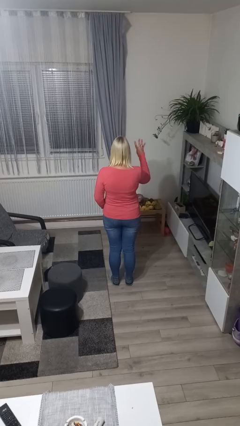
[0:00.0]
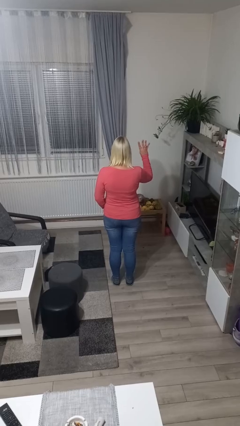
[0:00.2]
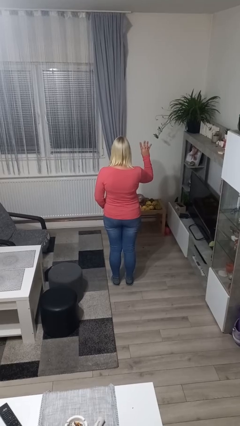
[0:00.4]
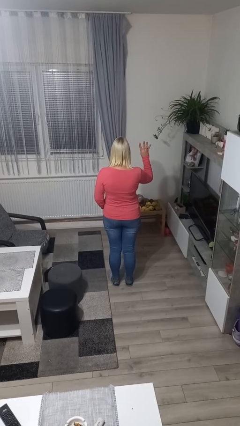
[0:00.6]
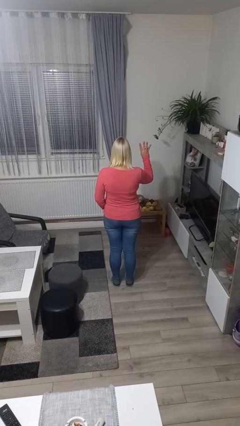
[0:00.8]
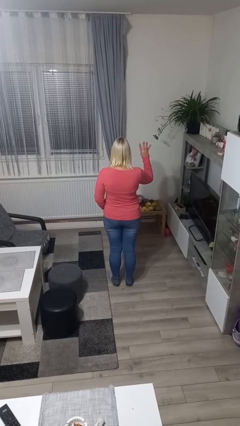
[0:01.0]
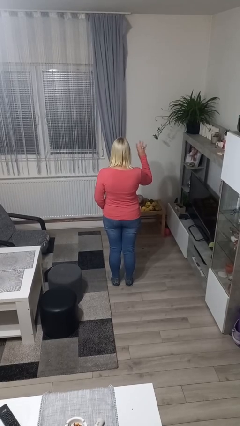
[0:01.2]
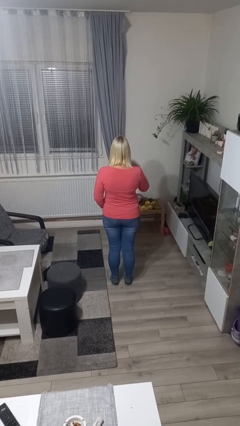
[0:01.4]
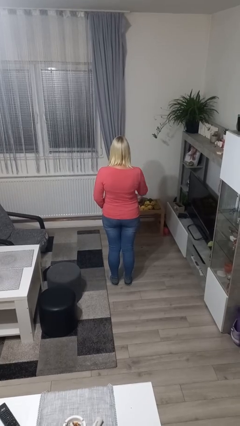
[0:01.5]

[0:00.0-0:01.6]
person gestures number four

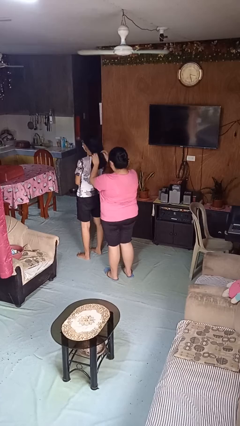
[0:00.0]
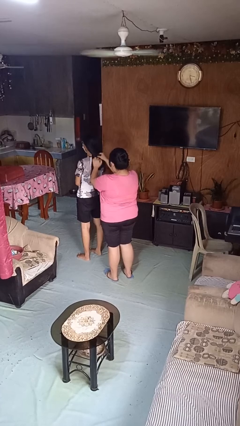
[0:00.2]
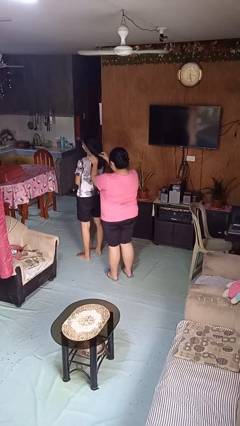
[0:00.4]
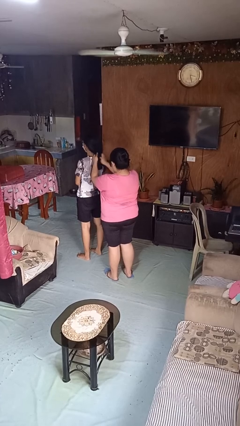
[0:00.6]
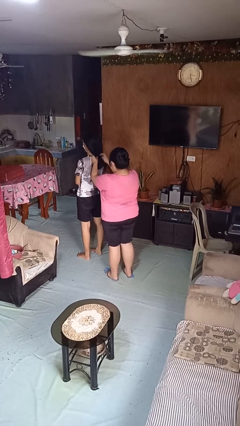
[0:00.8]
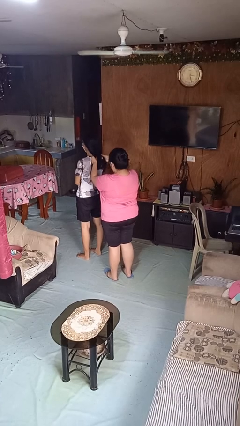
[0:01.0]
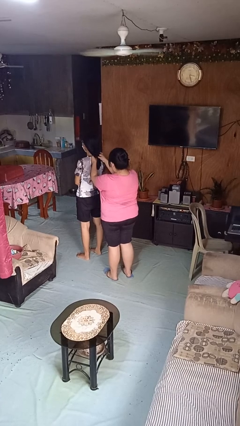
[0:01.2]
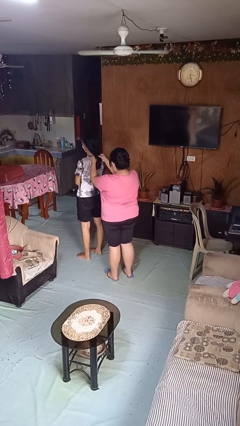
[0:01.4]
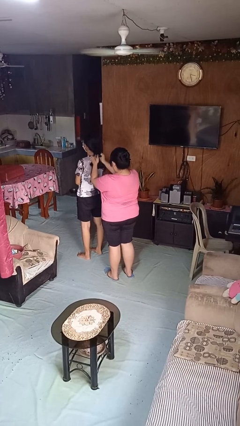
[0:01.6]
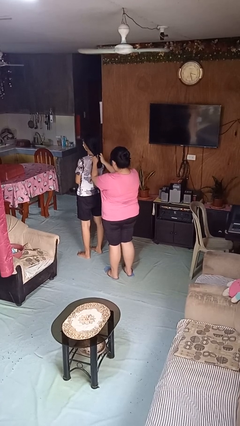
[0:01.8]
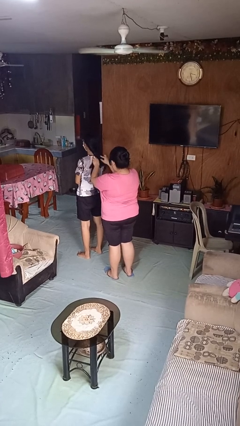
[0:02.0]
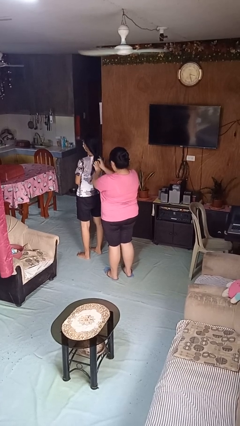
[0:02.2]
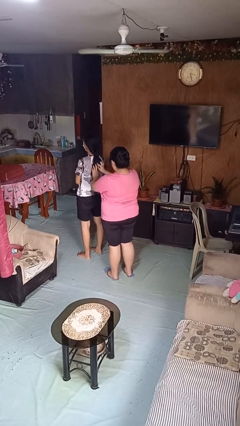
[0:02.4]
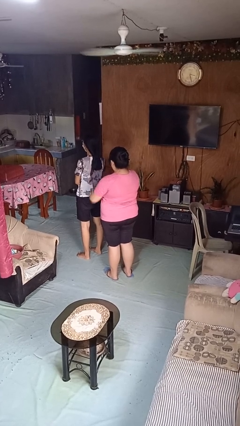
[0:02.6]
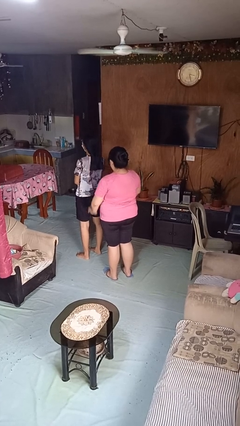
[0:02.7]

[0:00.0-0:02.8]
person braids hair of person

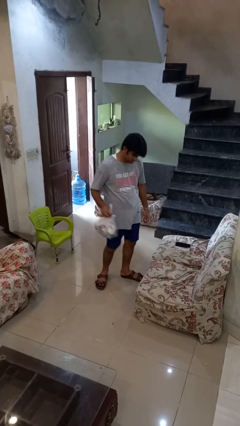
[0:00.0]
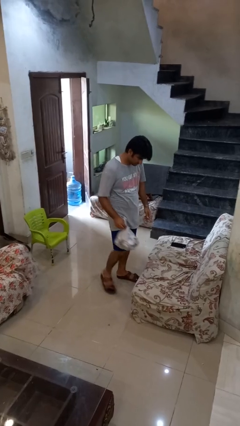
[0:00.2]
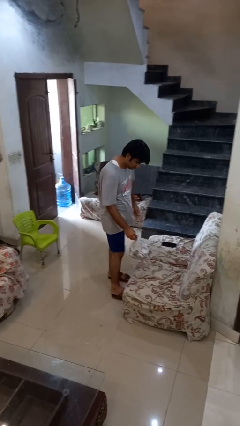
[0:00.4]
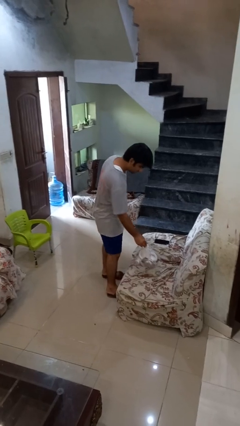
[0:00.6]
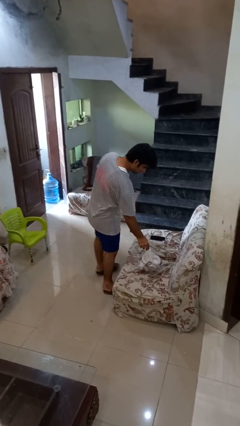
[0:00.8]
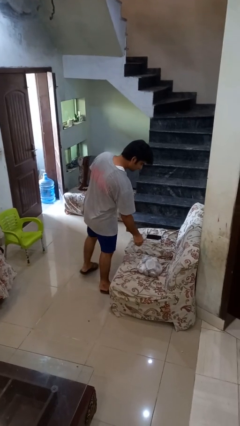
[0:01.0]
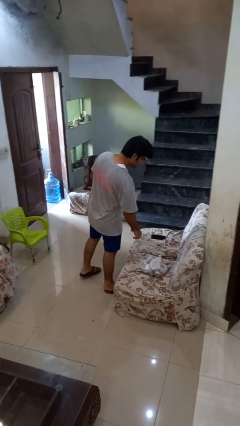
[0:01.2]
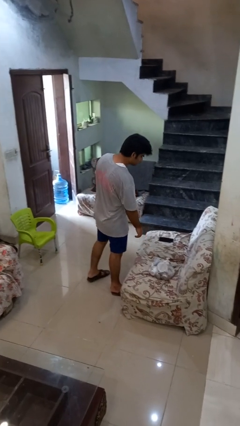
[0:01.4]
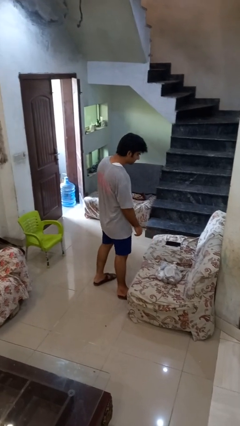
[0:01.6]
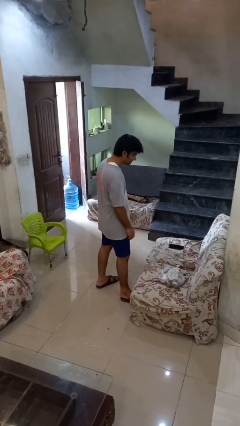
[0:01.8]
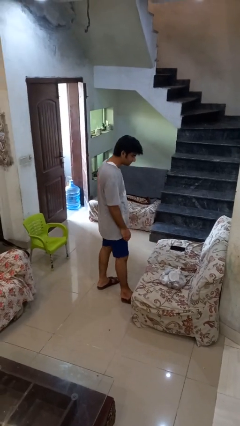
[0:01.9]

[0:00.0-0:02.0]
person puts down object on couch

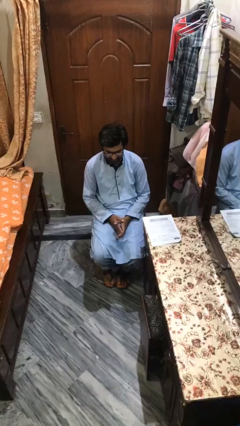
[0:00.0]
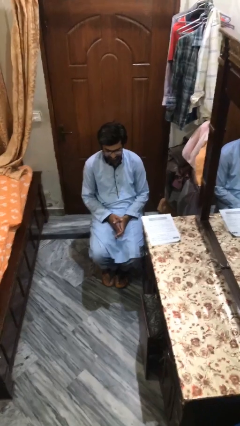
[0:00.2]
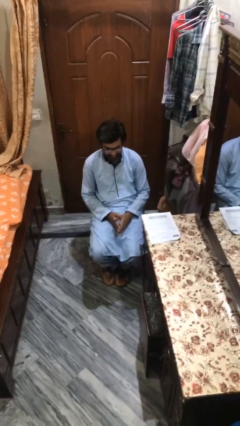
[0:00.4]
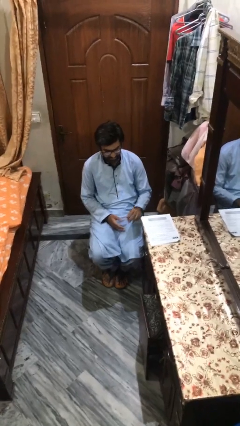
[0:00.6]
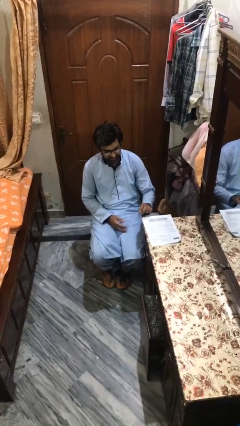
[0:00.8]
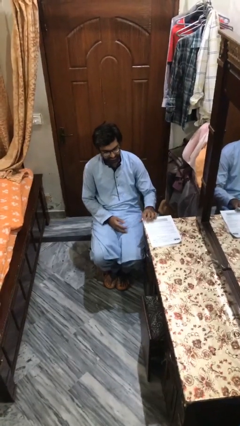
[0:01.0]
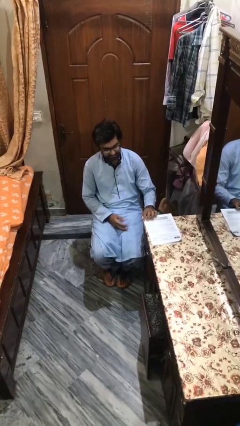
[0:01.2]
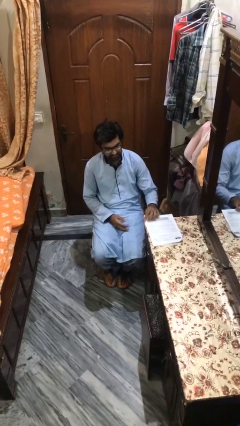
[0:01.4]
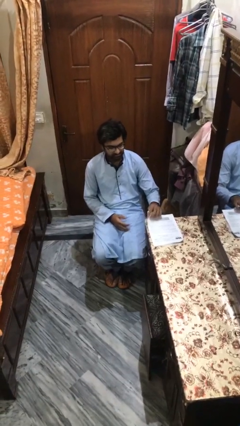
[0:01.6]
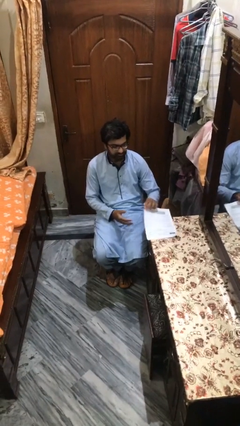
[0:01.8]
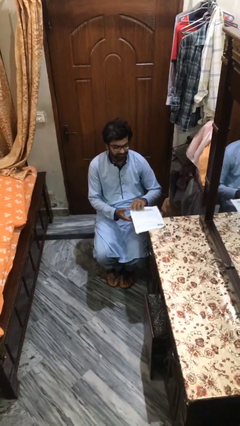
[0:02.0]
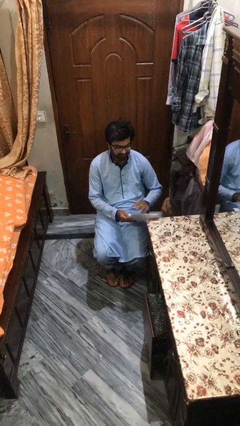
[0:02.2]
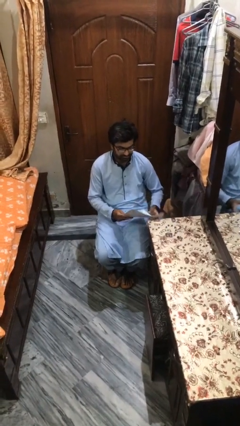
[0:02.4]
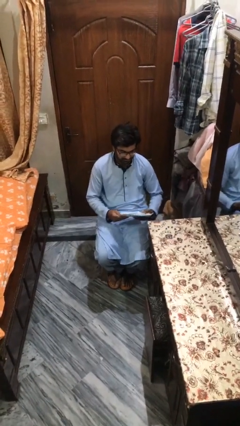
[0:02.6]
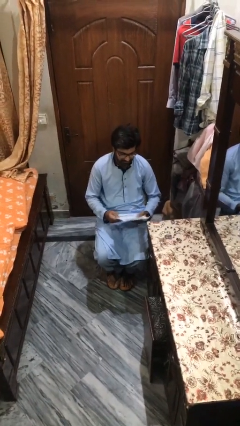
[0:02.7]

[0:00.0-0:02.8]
person picks up object from table

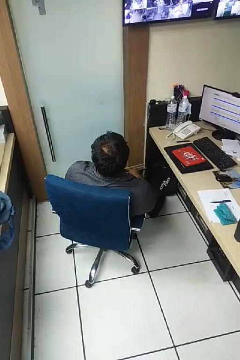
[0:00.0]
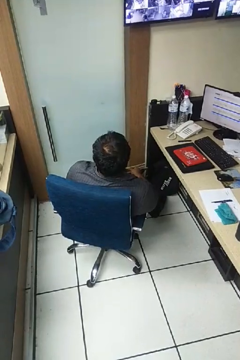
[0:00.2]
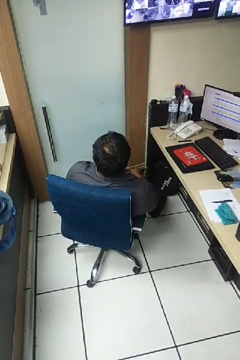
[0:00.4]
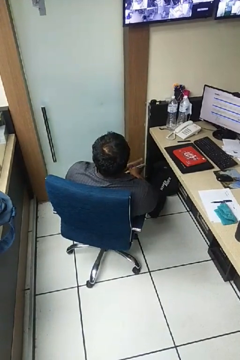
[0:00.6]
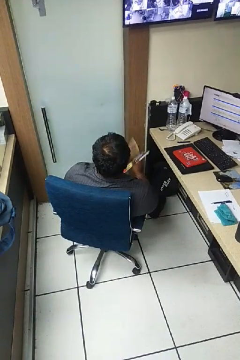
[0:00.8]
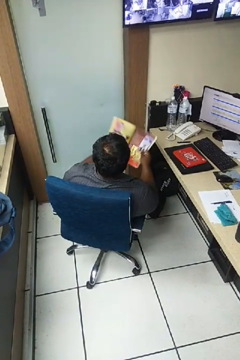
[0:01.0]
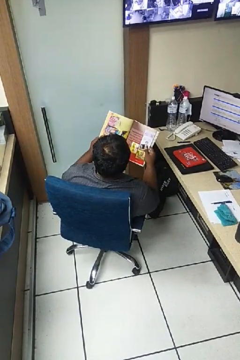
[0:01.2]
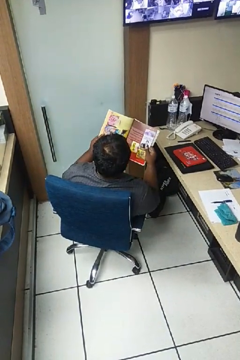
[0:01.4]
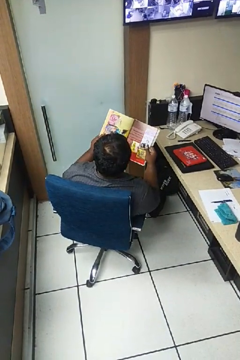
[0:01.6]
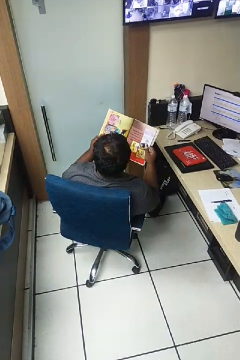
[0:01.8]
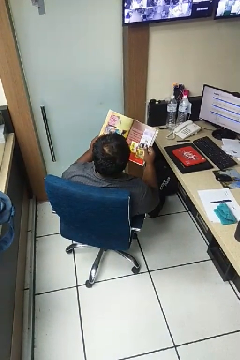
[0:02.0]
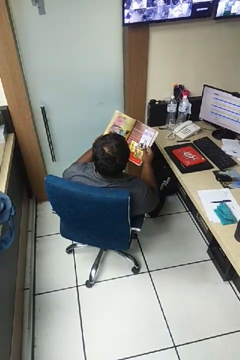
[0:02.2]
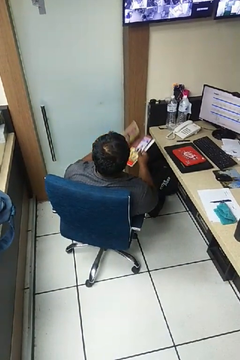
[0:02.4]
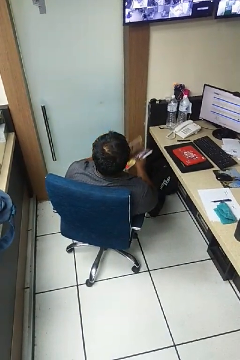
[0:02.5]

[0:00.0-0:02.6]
person reads magazine

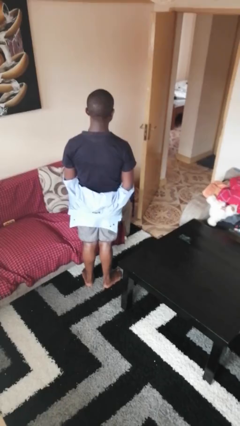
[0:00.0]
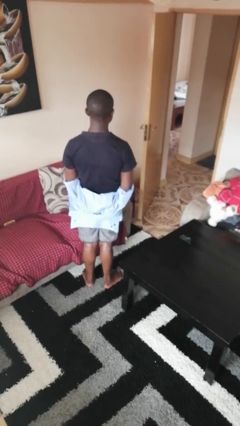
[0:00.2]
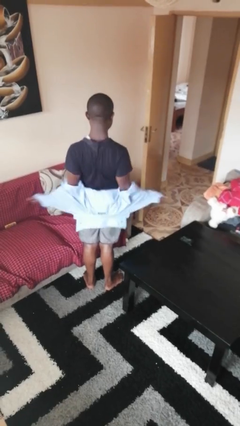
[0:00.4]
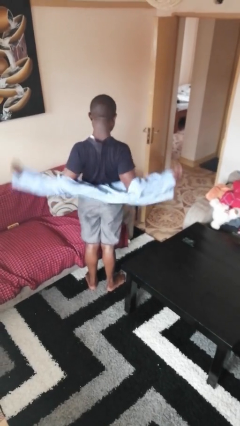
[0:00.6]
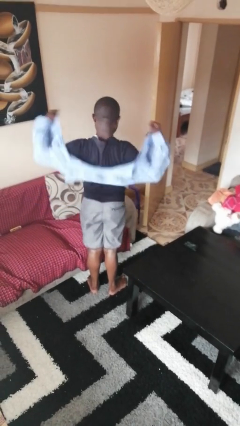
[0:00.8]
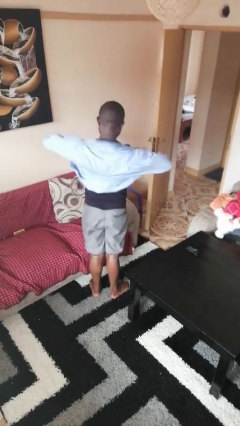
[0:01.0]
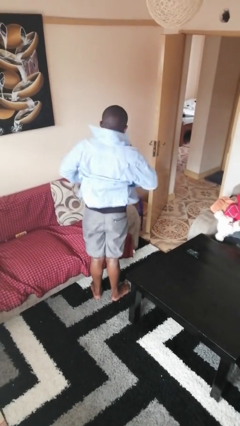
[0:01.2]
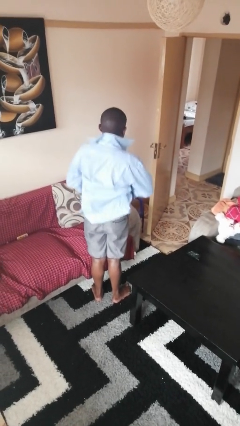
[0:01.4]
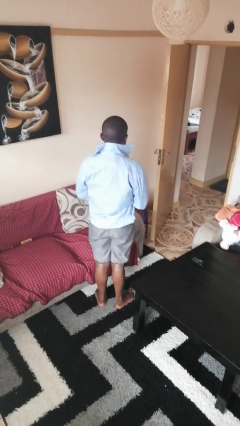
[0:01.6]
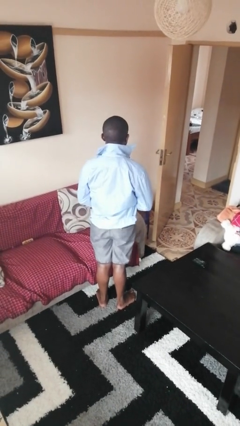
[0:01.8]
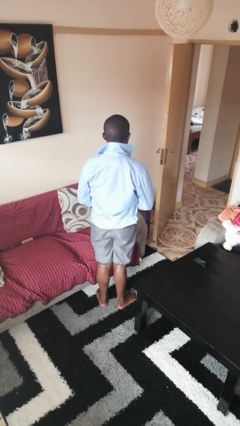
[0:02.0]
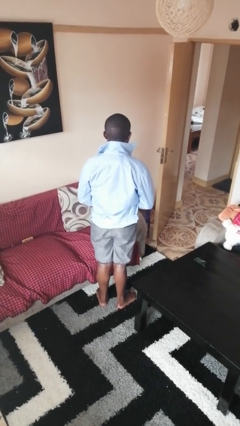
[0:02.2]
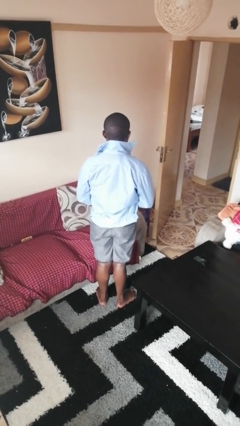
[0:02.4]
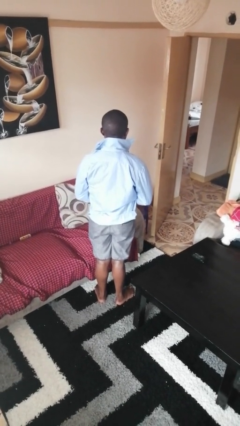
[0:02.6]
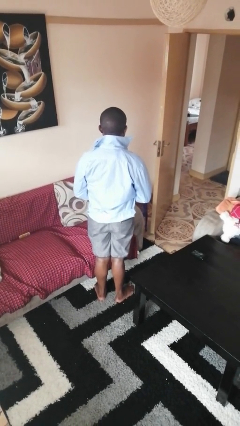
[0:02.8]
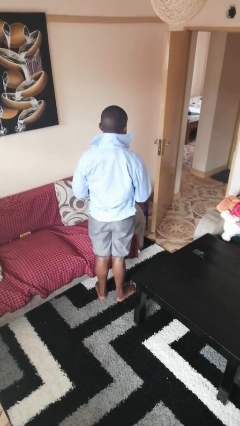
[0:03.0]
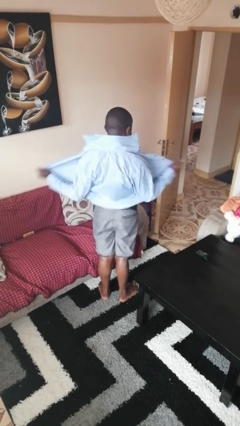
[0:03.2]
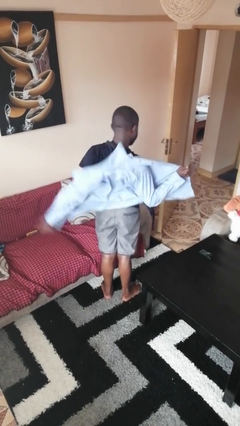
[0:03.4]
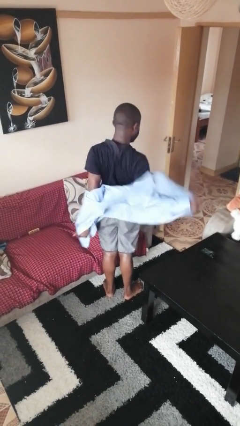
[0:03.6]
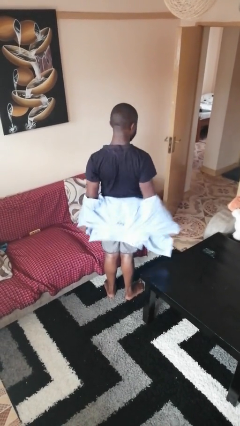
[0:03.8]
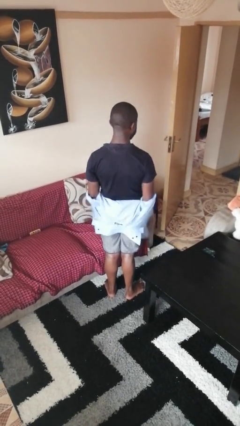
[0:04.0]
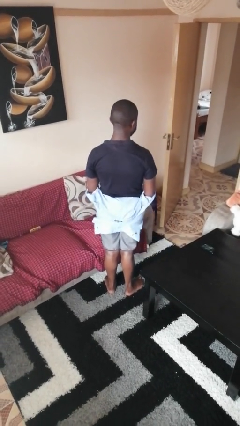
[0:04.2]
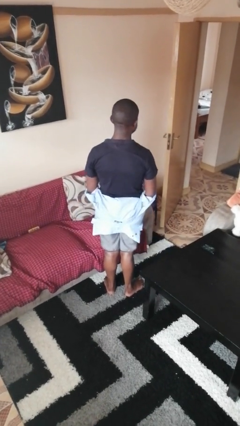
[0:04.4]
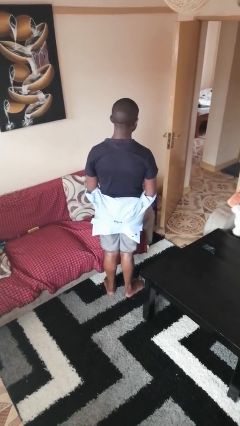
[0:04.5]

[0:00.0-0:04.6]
person puts on shirt

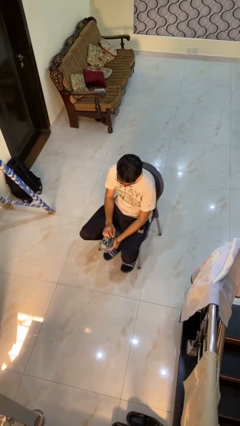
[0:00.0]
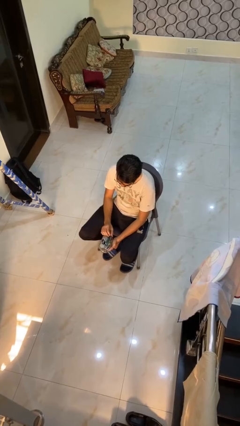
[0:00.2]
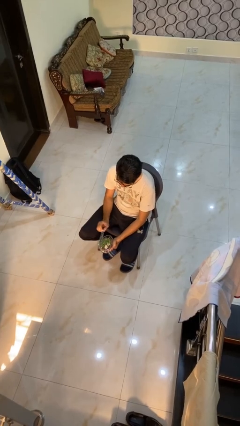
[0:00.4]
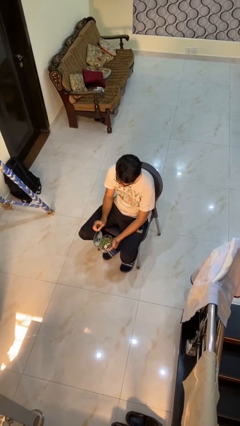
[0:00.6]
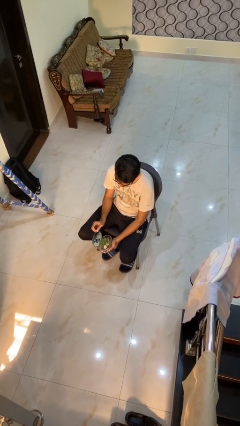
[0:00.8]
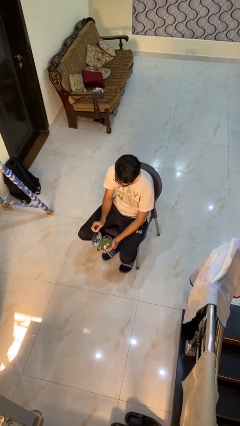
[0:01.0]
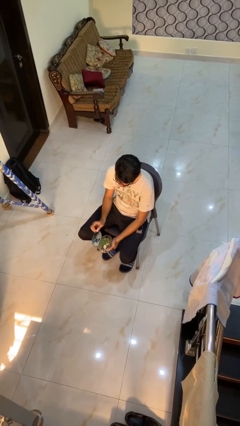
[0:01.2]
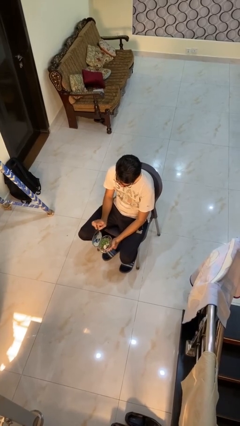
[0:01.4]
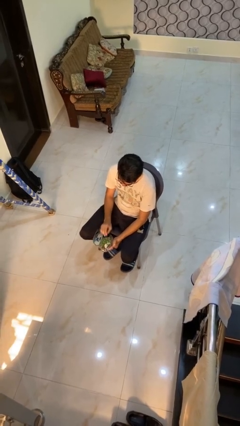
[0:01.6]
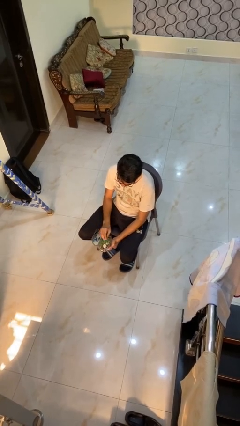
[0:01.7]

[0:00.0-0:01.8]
person opens jewelry box
